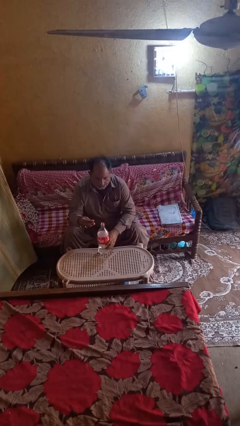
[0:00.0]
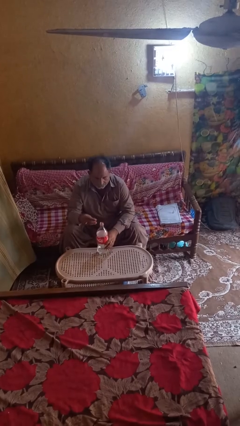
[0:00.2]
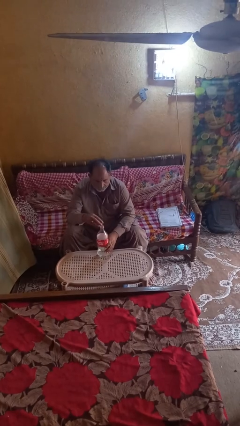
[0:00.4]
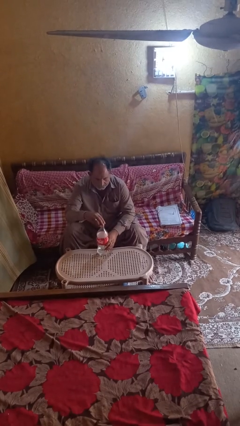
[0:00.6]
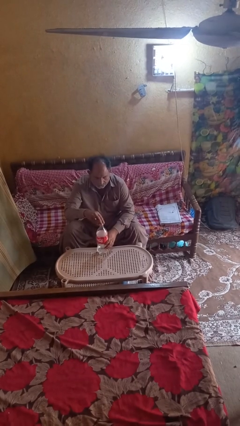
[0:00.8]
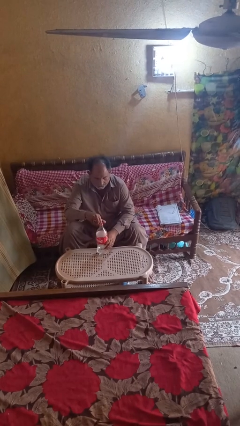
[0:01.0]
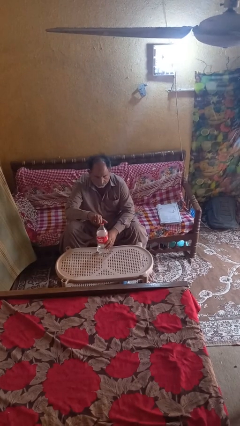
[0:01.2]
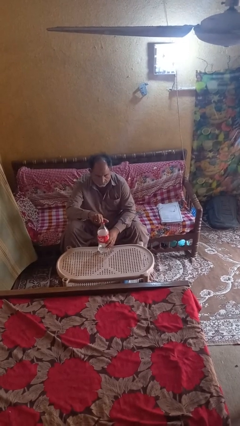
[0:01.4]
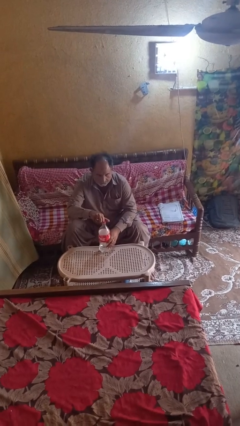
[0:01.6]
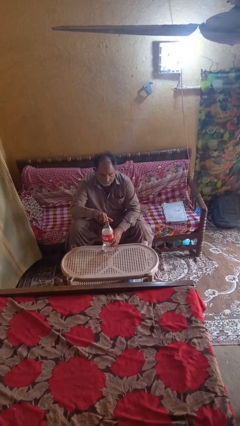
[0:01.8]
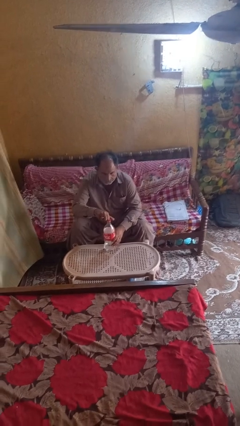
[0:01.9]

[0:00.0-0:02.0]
person screws lid to bottle

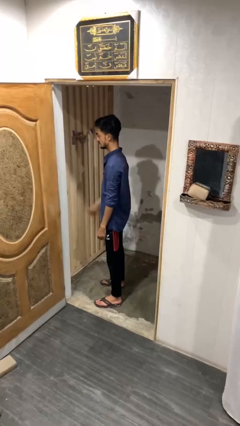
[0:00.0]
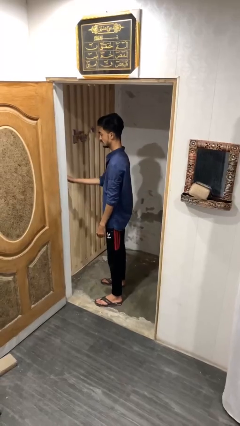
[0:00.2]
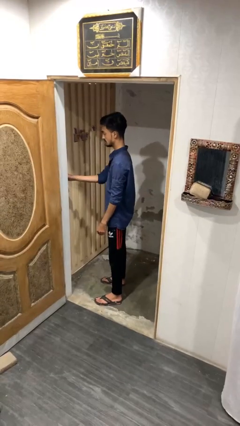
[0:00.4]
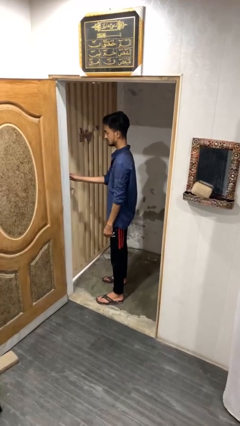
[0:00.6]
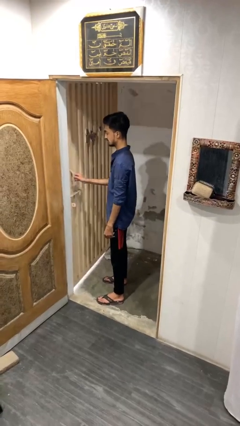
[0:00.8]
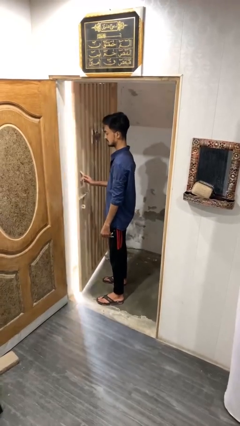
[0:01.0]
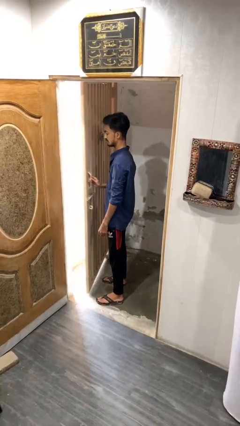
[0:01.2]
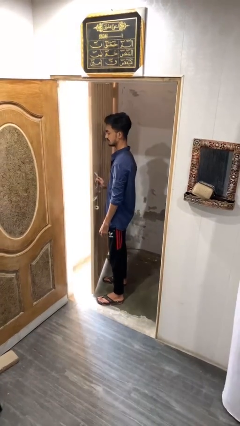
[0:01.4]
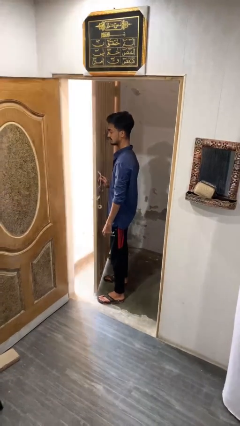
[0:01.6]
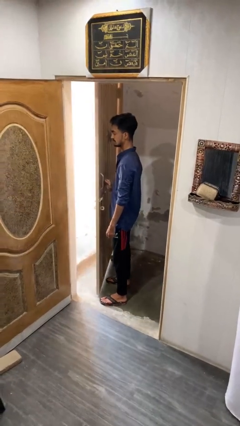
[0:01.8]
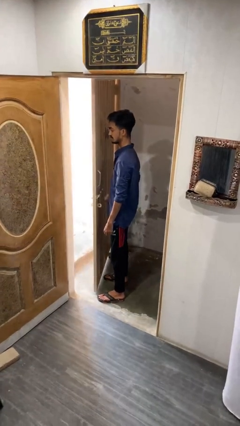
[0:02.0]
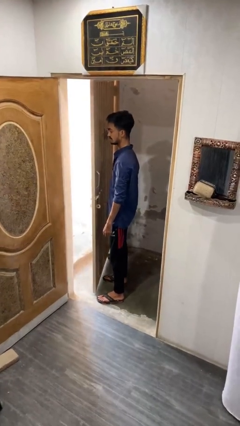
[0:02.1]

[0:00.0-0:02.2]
person opens gate

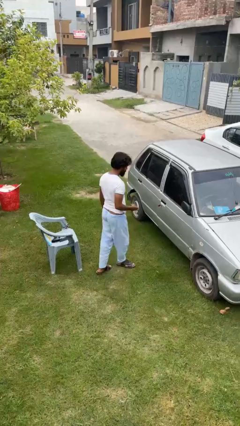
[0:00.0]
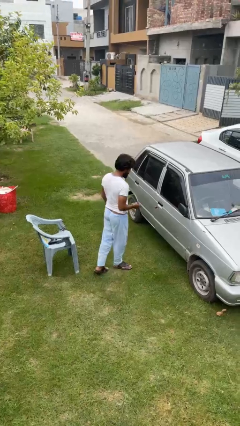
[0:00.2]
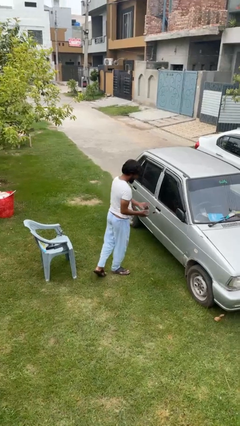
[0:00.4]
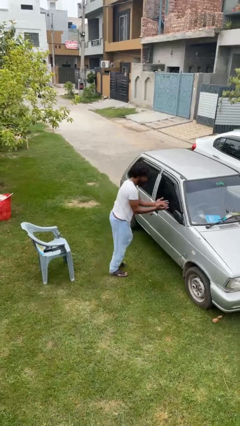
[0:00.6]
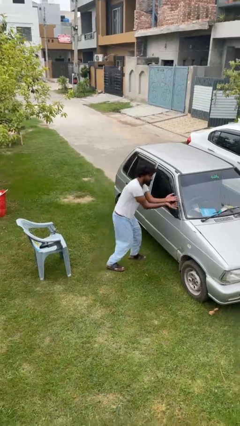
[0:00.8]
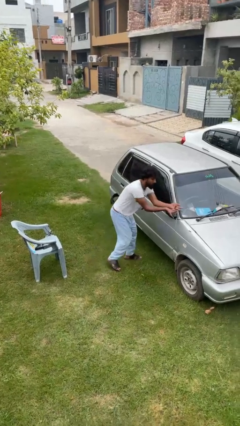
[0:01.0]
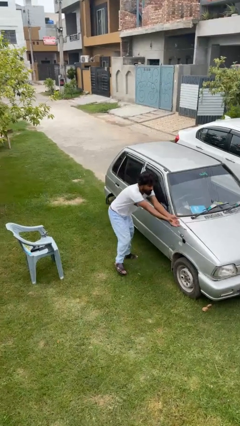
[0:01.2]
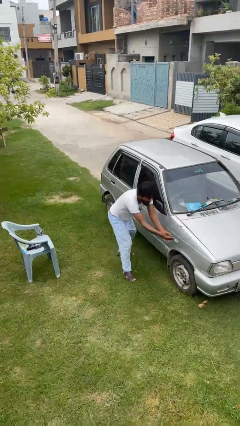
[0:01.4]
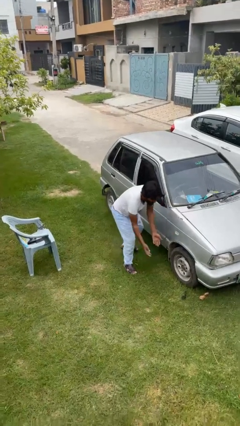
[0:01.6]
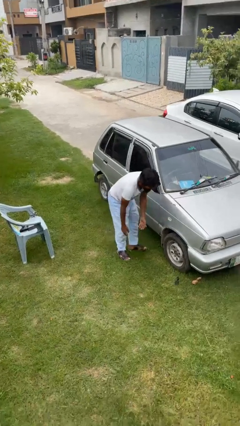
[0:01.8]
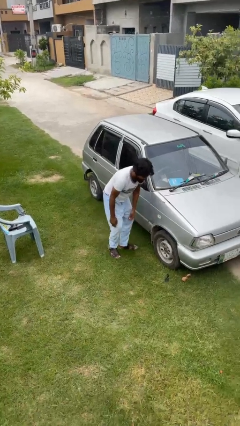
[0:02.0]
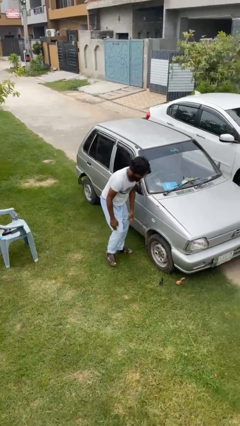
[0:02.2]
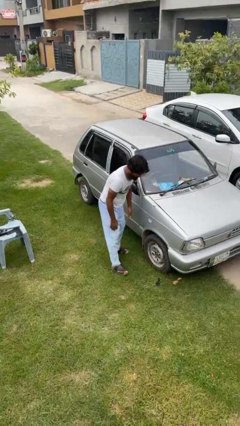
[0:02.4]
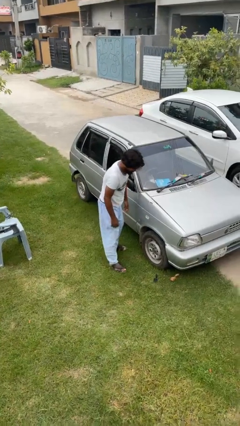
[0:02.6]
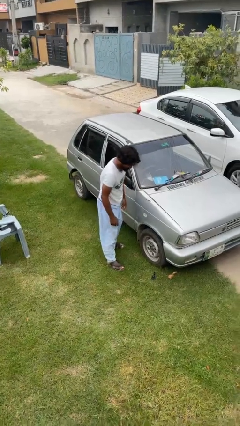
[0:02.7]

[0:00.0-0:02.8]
person drops object

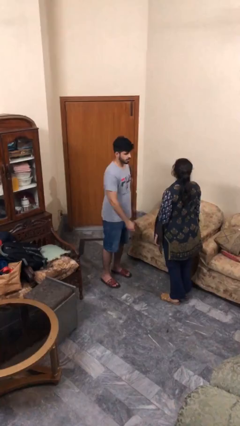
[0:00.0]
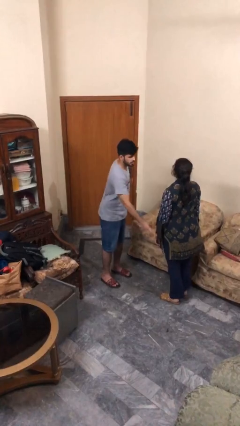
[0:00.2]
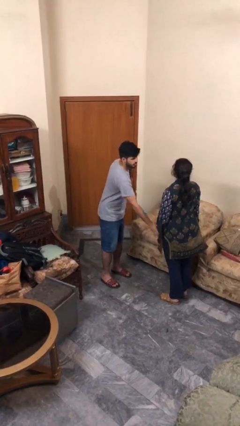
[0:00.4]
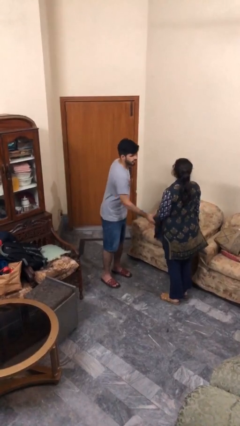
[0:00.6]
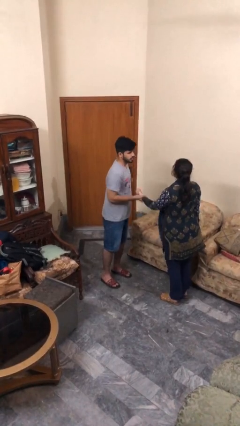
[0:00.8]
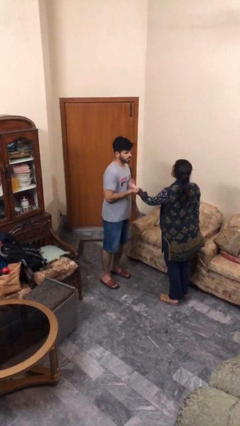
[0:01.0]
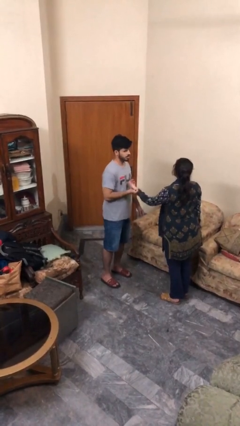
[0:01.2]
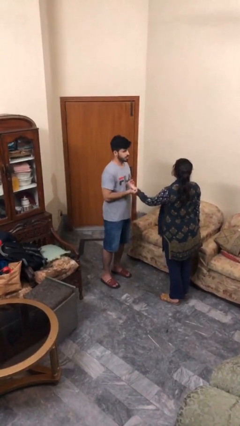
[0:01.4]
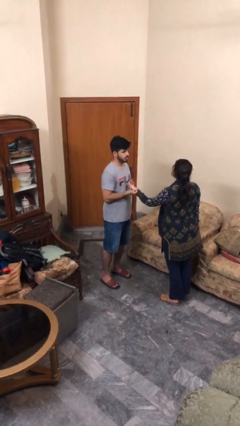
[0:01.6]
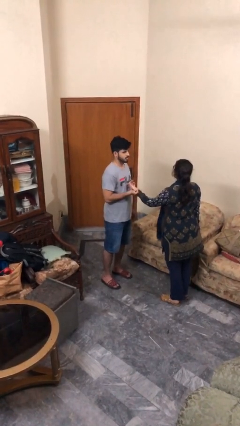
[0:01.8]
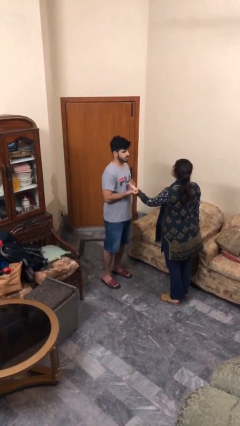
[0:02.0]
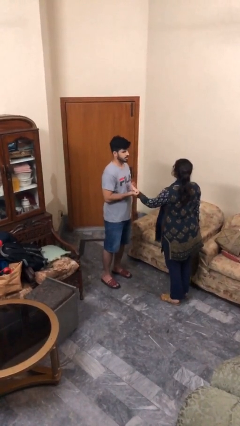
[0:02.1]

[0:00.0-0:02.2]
person grabs person by forearm

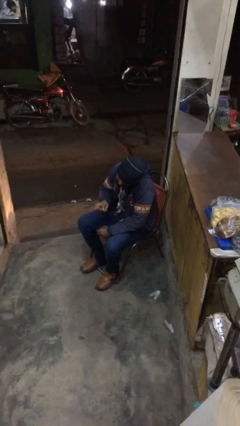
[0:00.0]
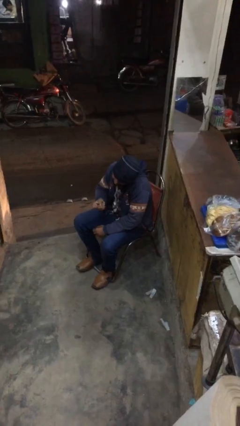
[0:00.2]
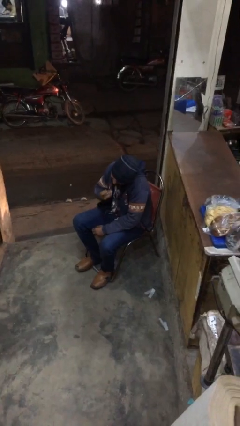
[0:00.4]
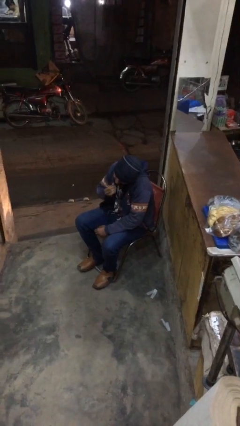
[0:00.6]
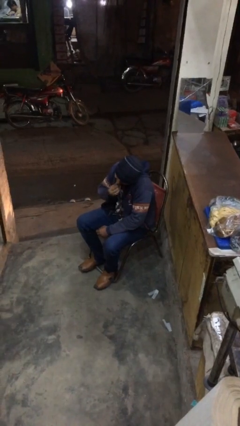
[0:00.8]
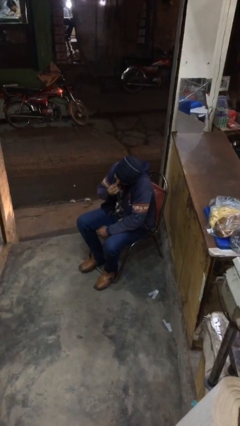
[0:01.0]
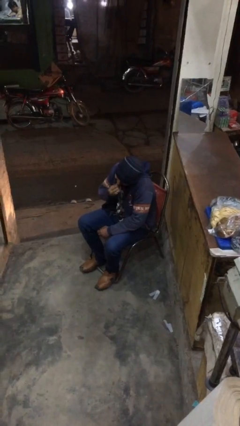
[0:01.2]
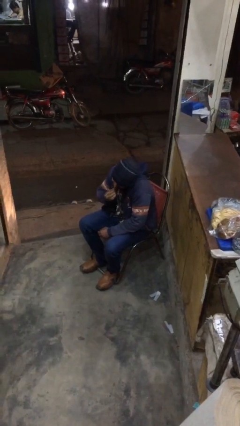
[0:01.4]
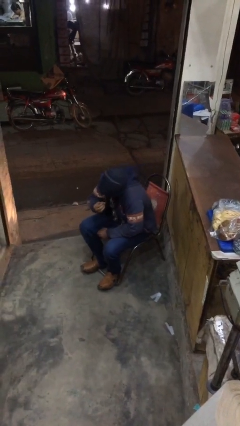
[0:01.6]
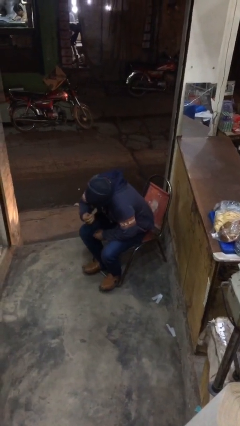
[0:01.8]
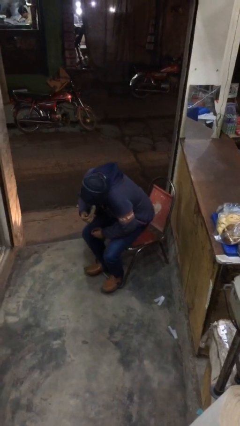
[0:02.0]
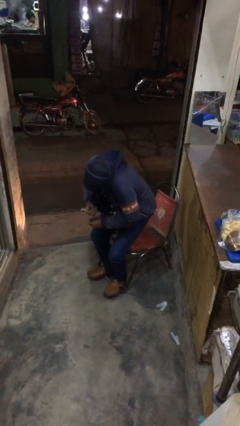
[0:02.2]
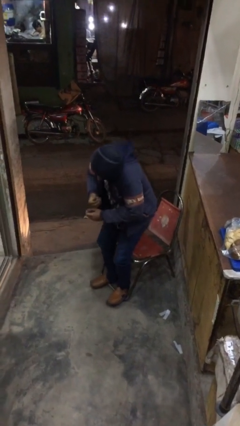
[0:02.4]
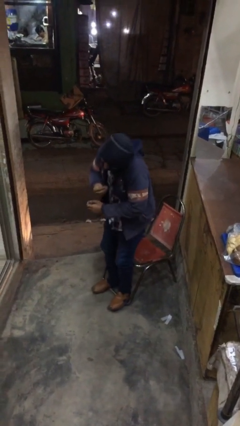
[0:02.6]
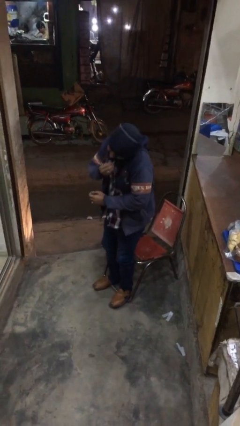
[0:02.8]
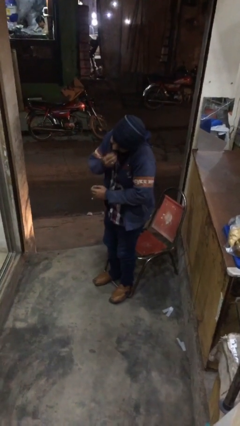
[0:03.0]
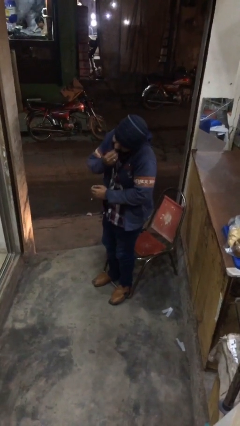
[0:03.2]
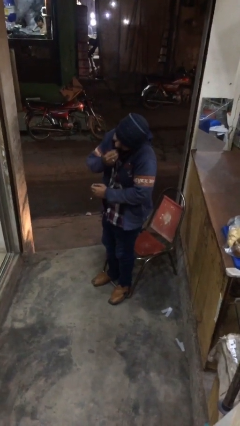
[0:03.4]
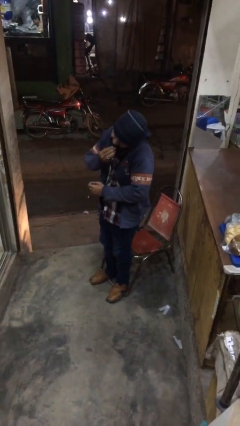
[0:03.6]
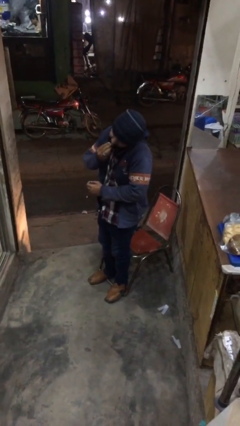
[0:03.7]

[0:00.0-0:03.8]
person stands up

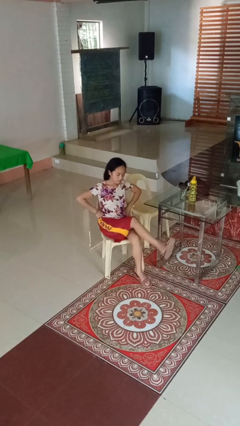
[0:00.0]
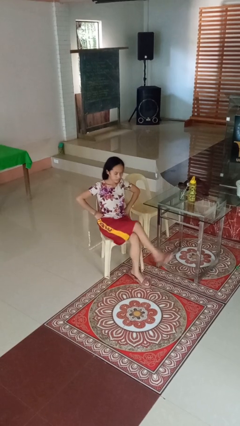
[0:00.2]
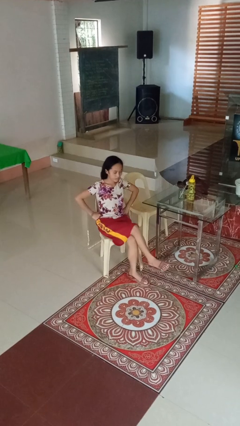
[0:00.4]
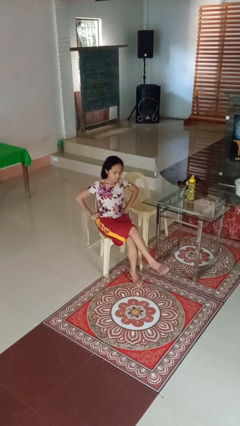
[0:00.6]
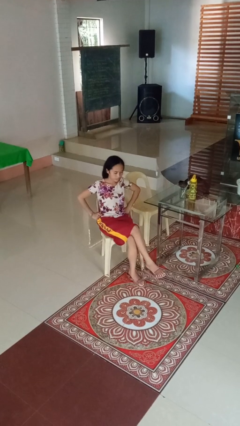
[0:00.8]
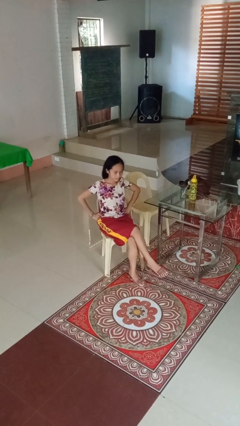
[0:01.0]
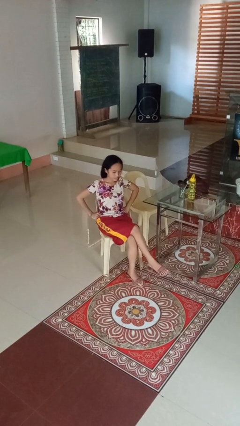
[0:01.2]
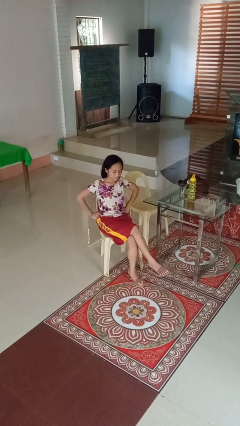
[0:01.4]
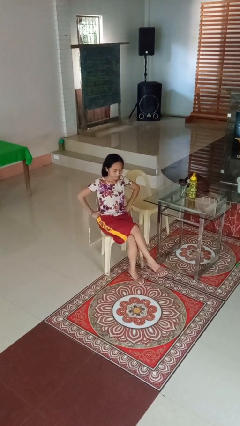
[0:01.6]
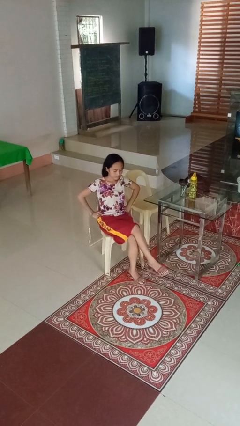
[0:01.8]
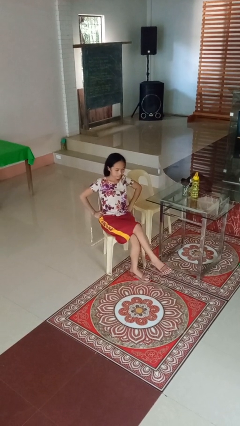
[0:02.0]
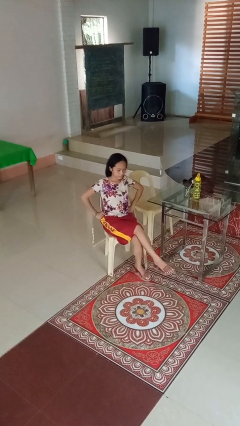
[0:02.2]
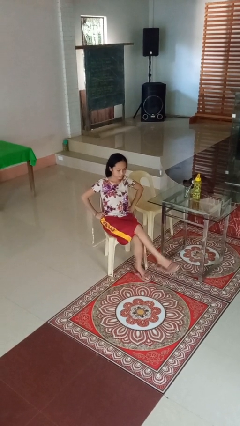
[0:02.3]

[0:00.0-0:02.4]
person crosses legs

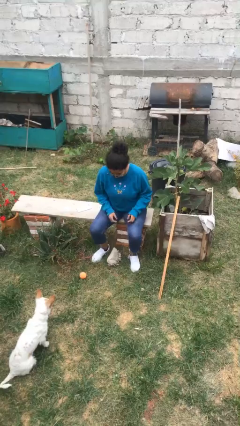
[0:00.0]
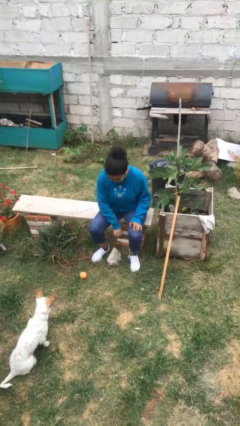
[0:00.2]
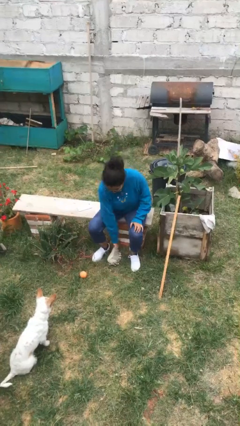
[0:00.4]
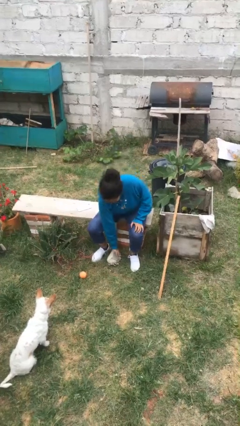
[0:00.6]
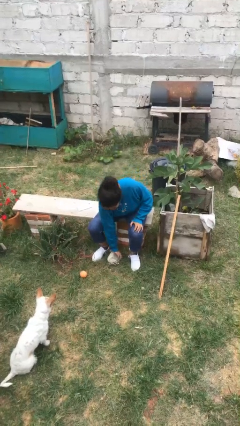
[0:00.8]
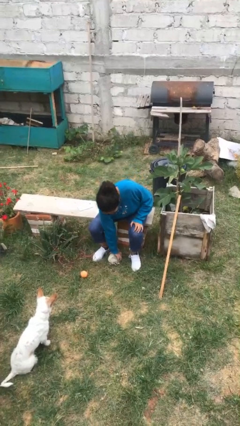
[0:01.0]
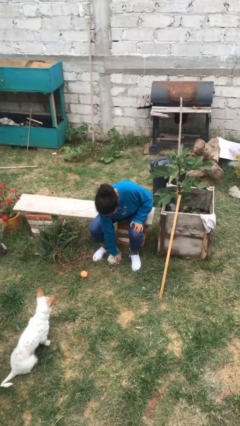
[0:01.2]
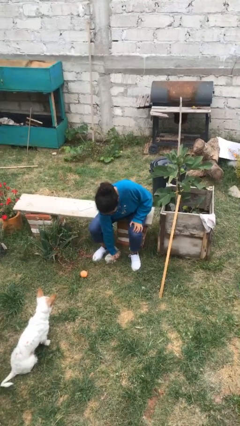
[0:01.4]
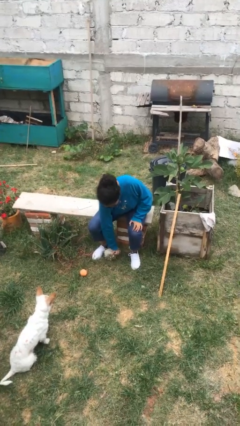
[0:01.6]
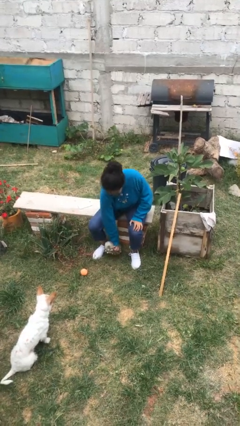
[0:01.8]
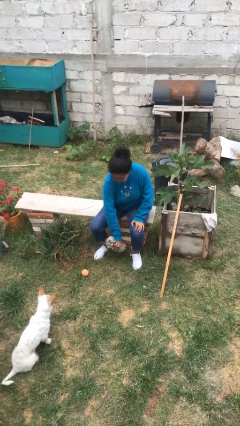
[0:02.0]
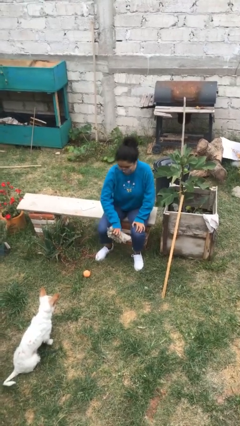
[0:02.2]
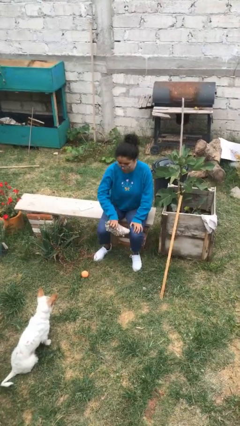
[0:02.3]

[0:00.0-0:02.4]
person picks up object from floor
